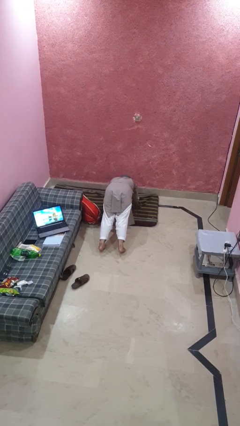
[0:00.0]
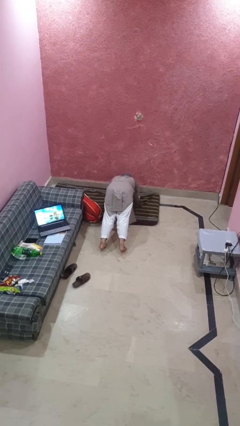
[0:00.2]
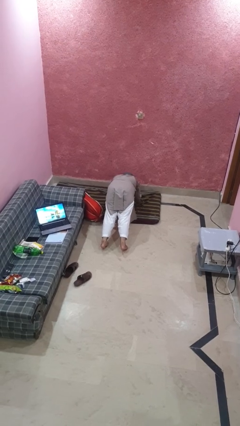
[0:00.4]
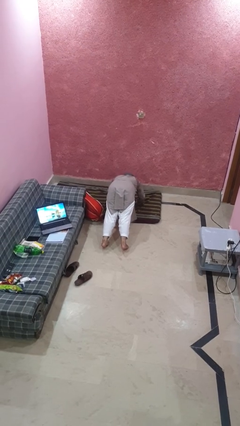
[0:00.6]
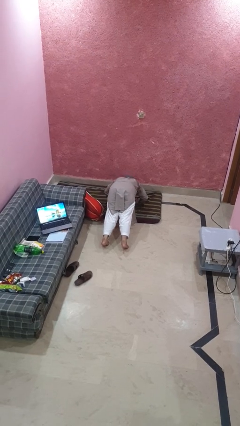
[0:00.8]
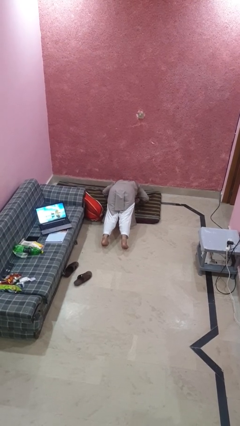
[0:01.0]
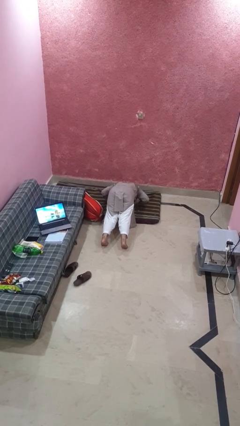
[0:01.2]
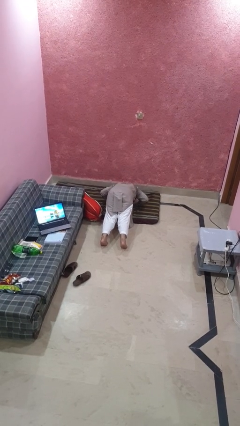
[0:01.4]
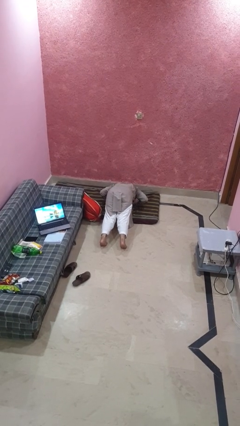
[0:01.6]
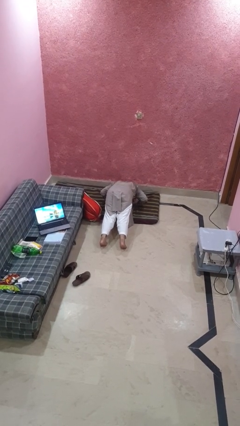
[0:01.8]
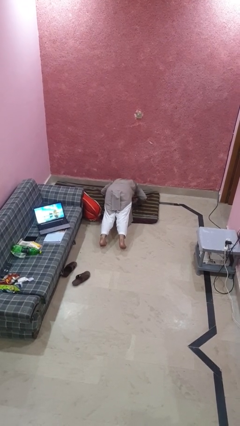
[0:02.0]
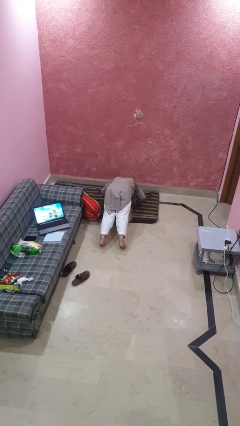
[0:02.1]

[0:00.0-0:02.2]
person exercises with pushup

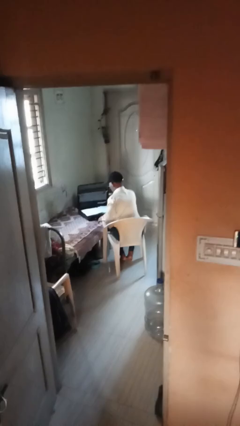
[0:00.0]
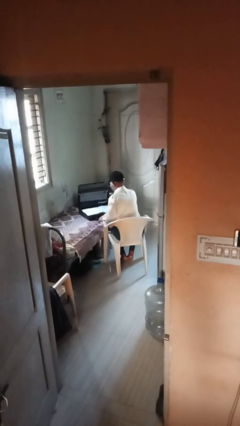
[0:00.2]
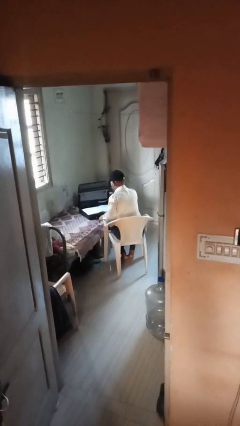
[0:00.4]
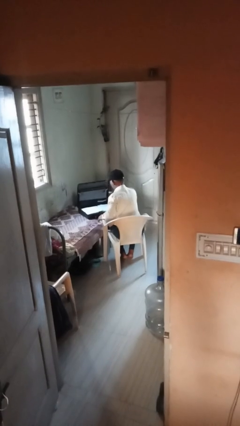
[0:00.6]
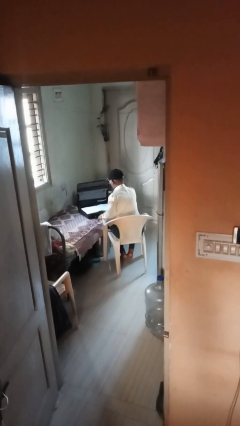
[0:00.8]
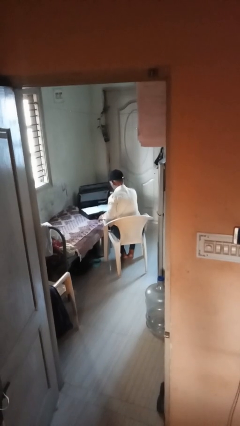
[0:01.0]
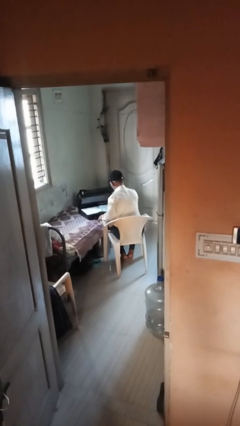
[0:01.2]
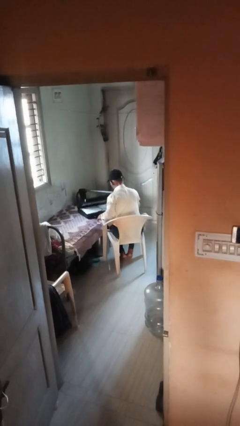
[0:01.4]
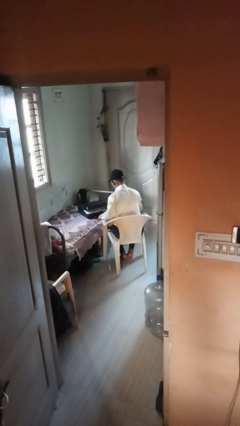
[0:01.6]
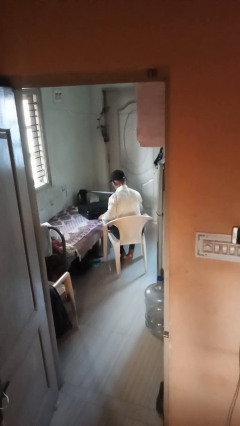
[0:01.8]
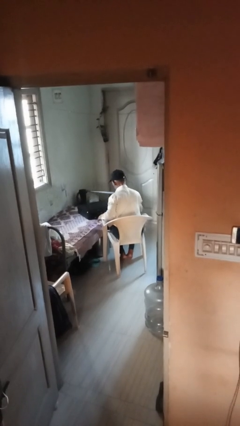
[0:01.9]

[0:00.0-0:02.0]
person closes suitcase

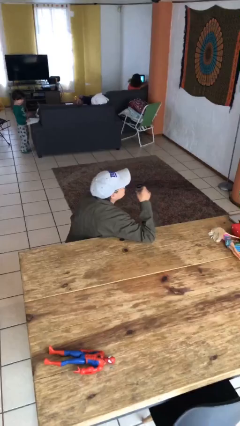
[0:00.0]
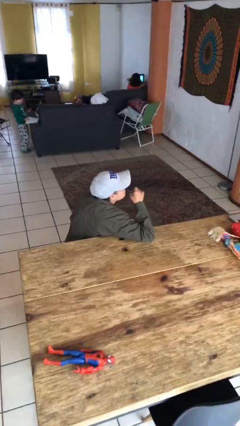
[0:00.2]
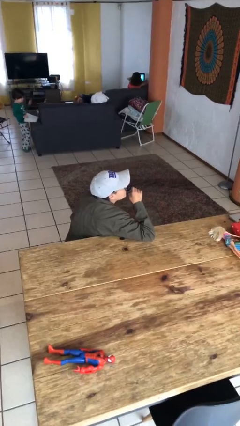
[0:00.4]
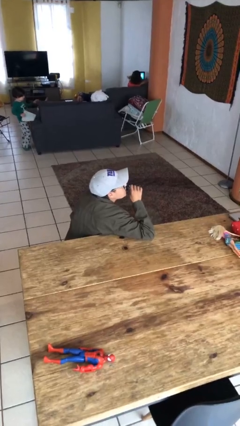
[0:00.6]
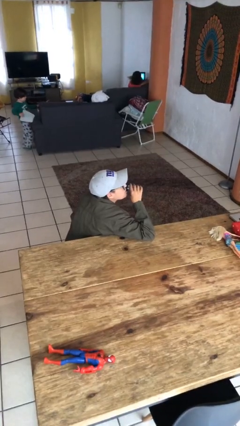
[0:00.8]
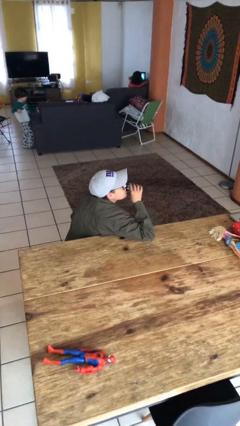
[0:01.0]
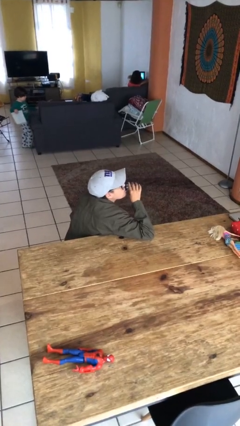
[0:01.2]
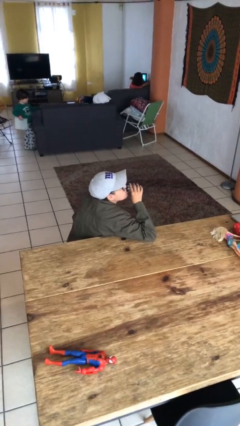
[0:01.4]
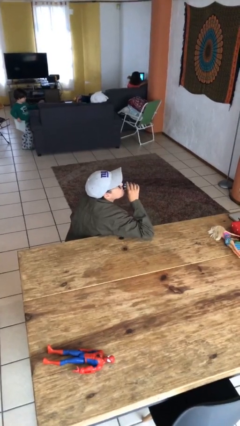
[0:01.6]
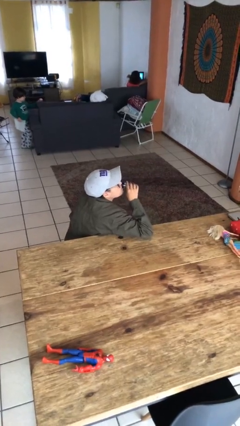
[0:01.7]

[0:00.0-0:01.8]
person drinks from shotglass

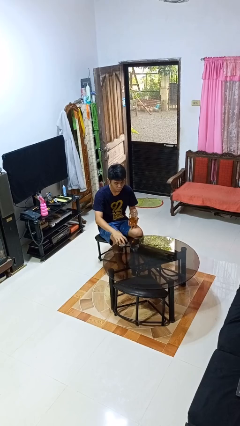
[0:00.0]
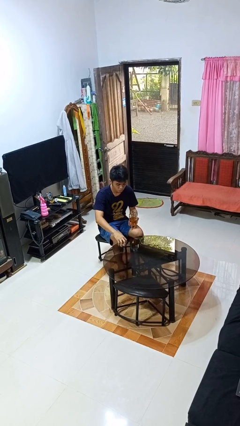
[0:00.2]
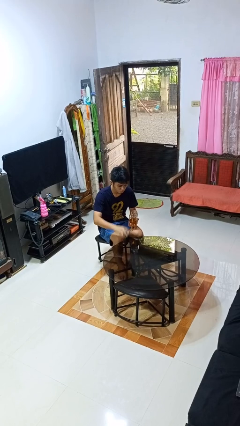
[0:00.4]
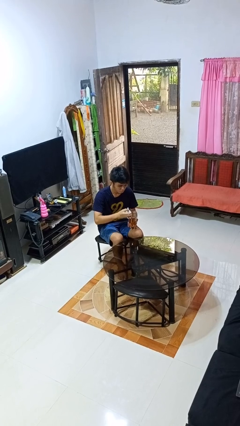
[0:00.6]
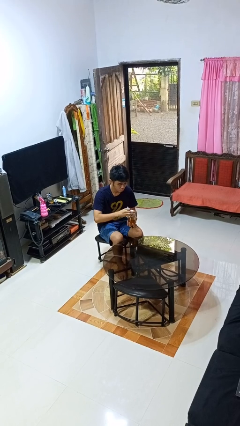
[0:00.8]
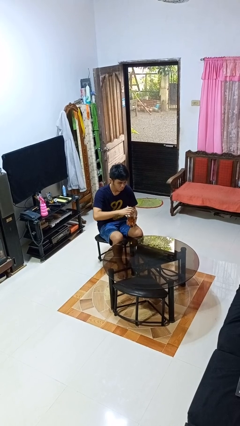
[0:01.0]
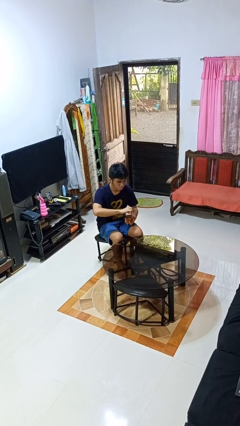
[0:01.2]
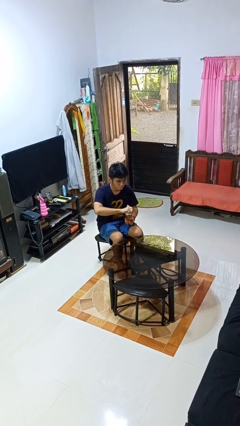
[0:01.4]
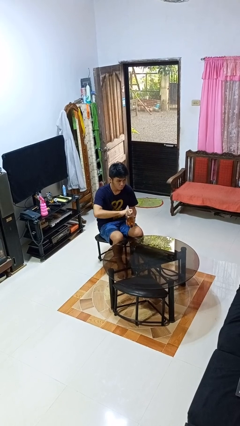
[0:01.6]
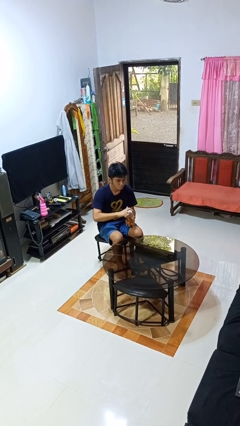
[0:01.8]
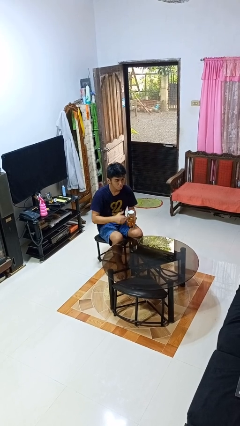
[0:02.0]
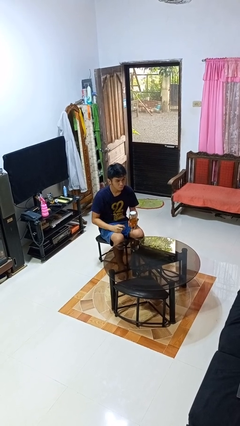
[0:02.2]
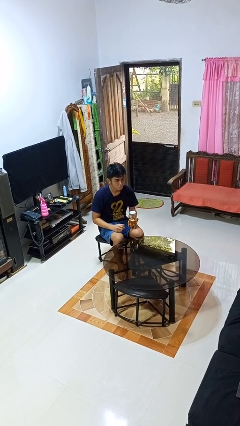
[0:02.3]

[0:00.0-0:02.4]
person closes jar

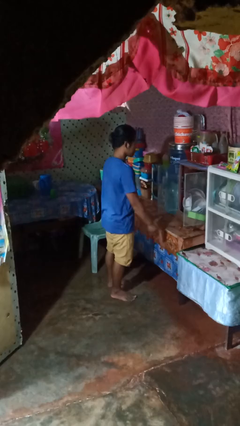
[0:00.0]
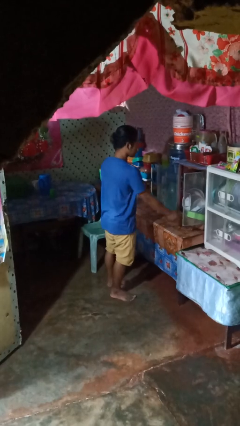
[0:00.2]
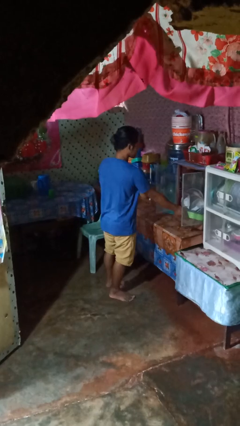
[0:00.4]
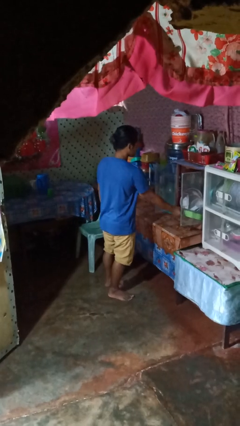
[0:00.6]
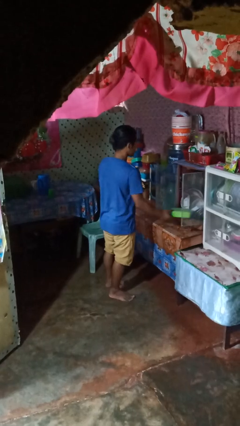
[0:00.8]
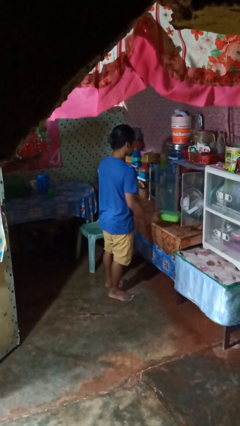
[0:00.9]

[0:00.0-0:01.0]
person picks up object from cabinet

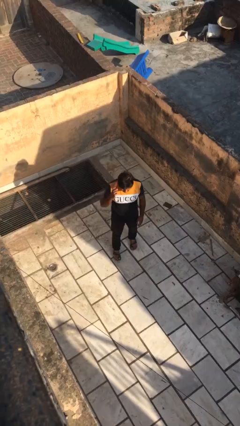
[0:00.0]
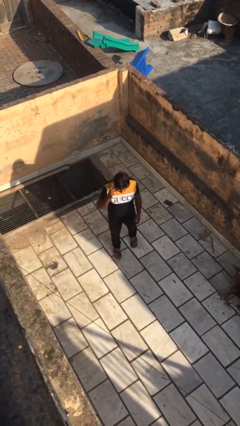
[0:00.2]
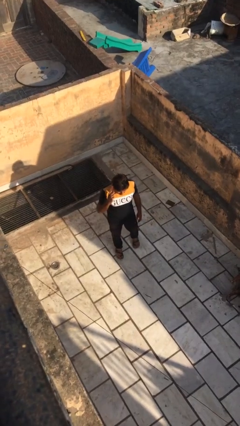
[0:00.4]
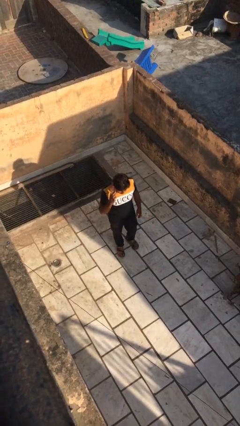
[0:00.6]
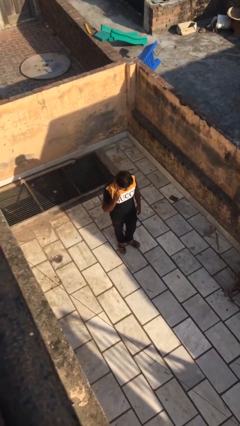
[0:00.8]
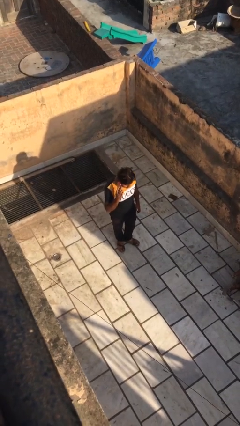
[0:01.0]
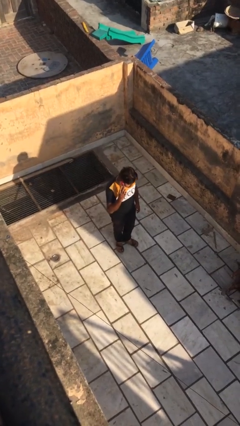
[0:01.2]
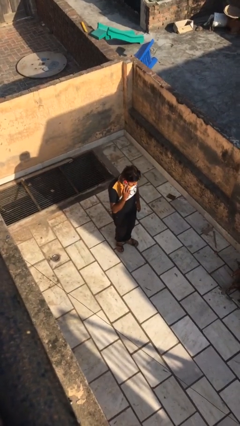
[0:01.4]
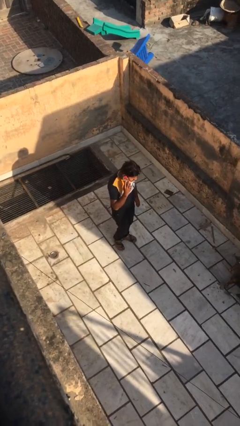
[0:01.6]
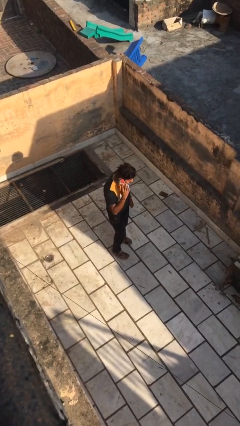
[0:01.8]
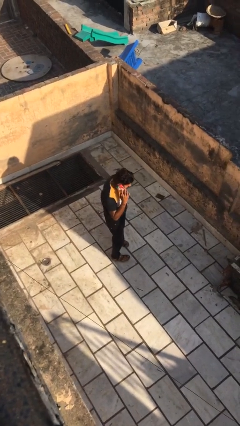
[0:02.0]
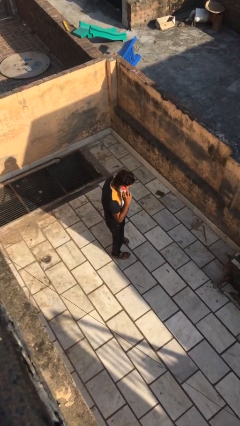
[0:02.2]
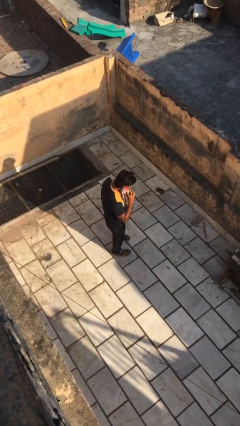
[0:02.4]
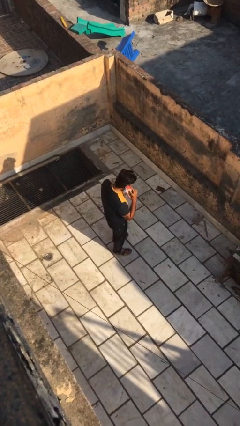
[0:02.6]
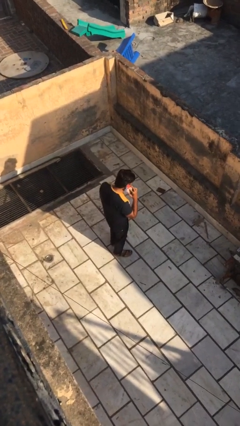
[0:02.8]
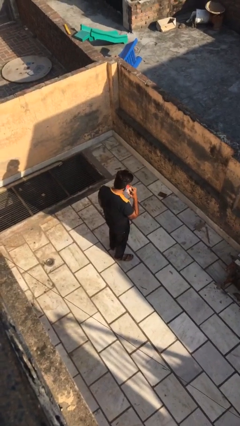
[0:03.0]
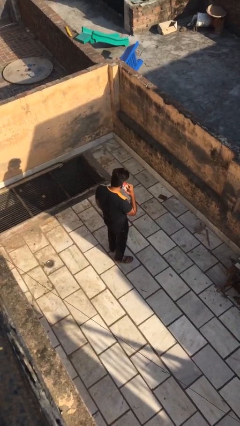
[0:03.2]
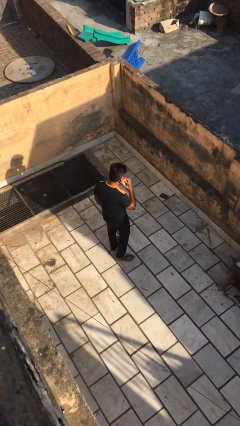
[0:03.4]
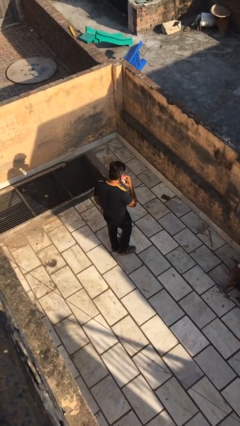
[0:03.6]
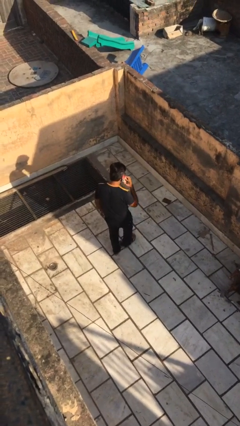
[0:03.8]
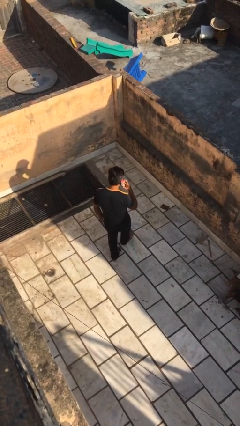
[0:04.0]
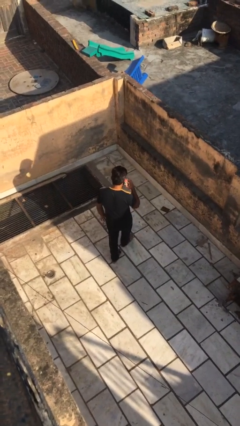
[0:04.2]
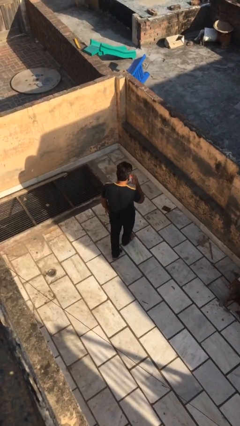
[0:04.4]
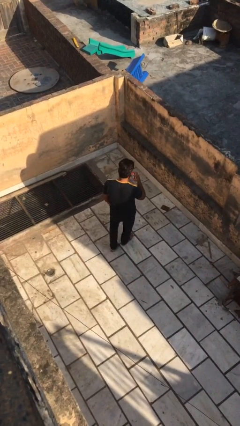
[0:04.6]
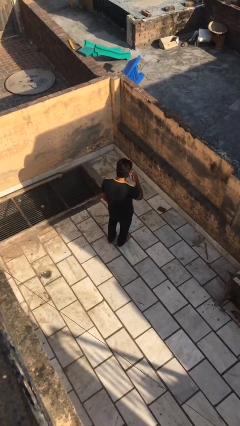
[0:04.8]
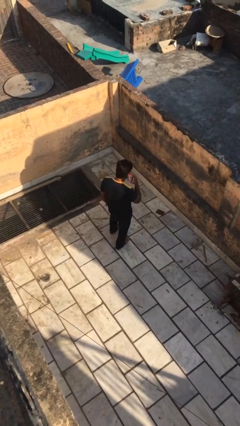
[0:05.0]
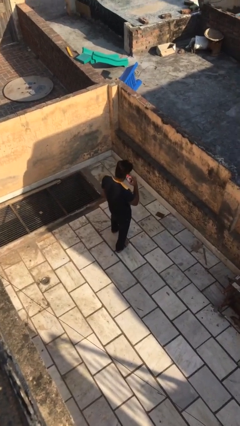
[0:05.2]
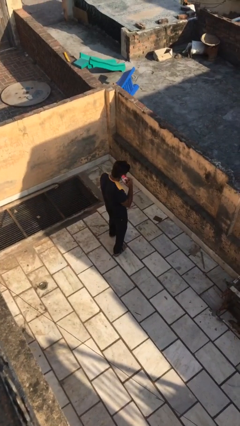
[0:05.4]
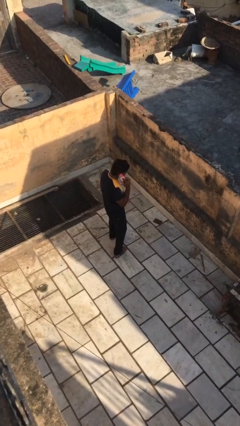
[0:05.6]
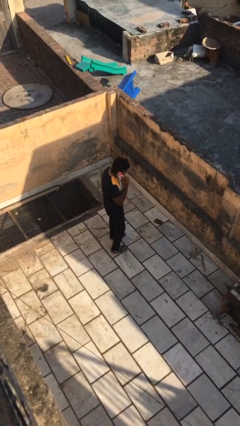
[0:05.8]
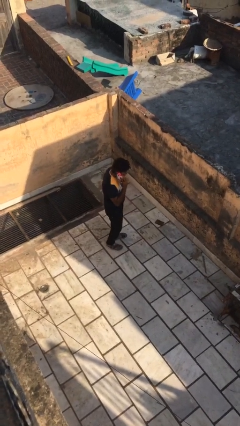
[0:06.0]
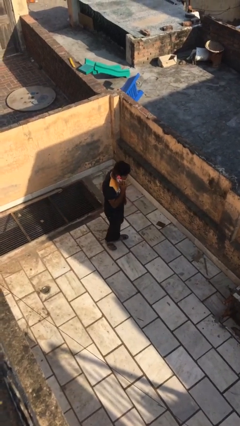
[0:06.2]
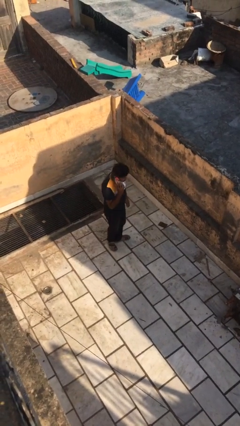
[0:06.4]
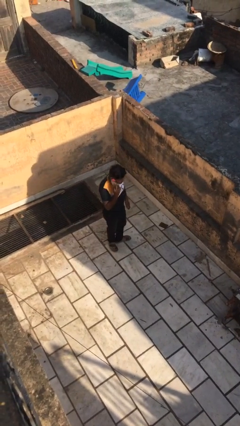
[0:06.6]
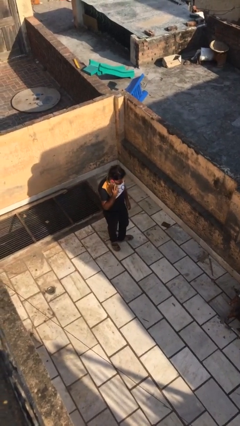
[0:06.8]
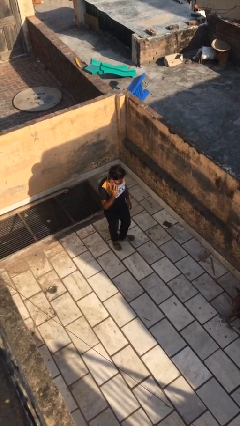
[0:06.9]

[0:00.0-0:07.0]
person talks on phone

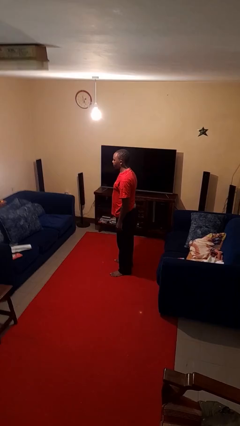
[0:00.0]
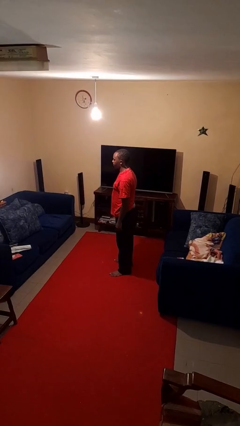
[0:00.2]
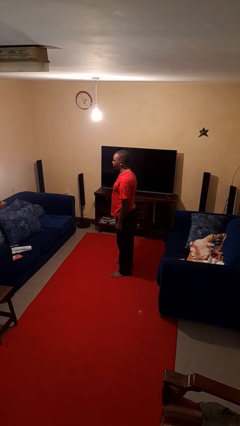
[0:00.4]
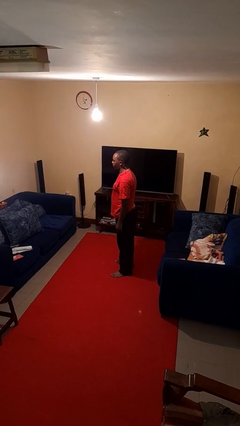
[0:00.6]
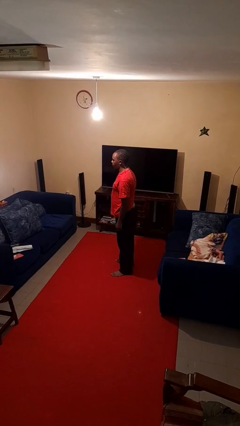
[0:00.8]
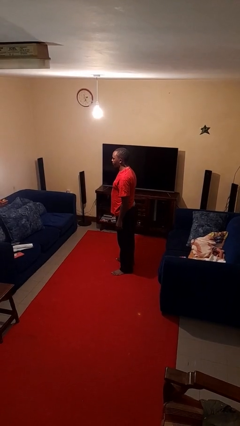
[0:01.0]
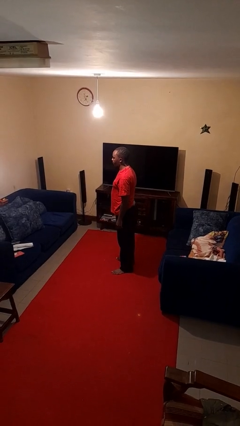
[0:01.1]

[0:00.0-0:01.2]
person stands up
